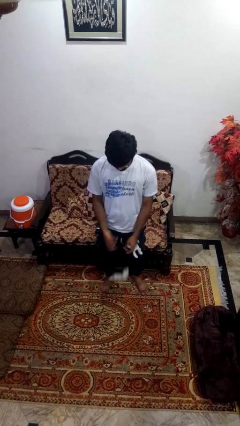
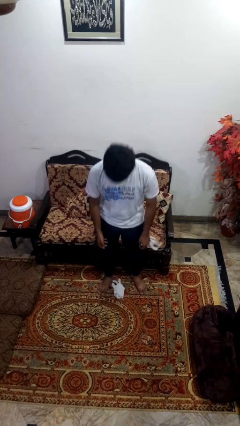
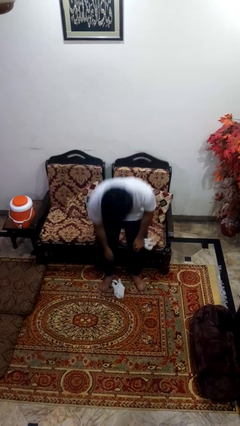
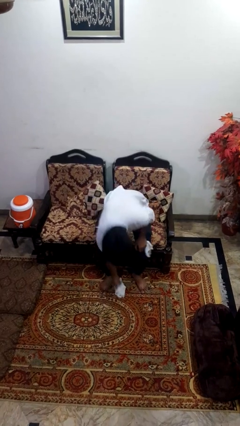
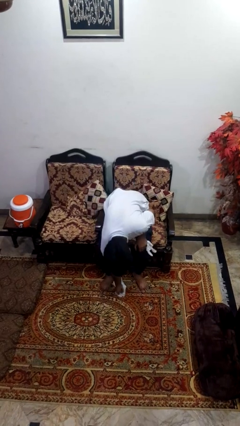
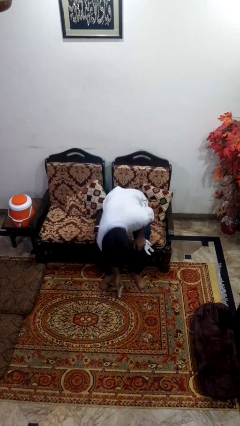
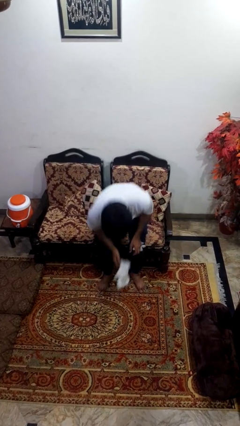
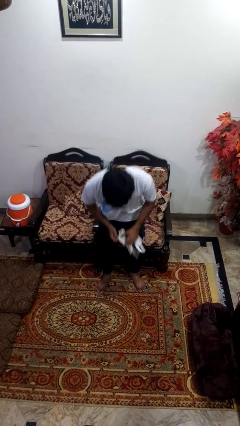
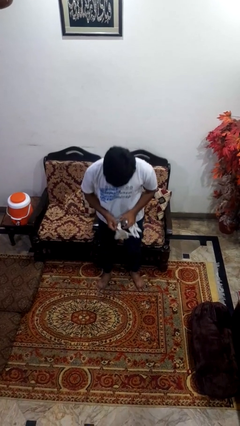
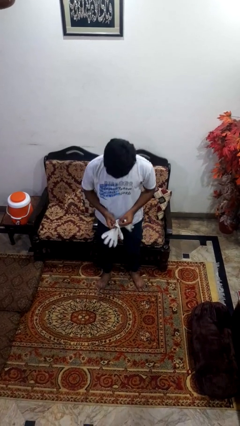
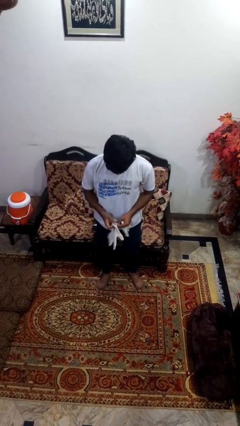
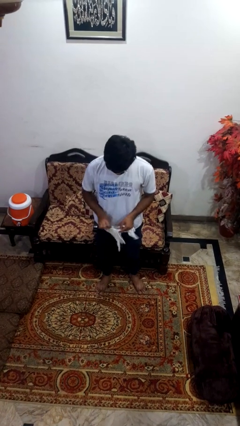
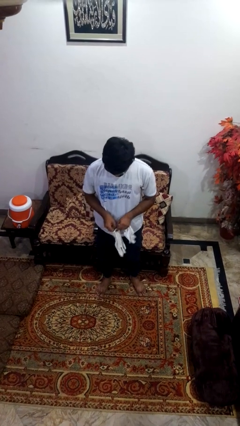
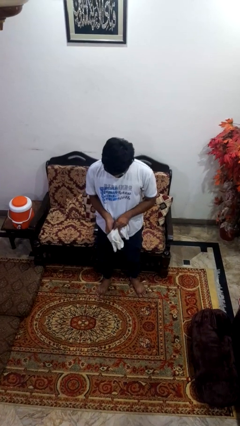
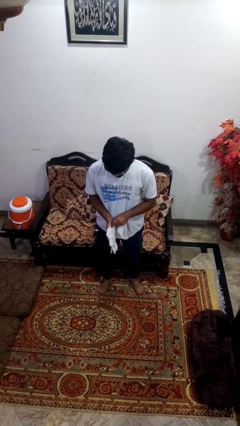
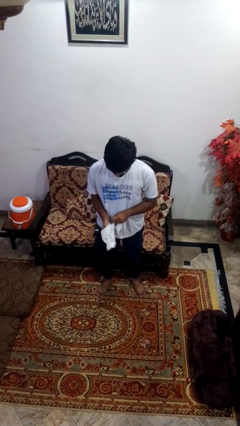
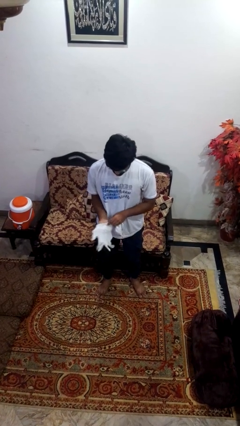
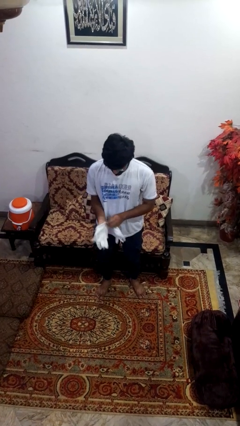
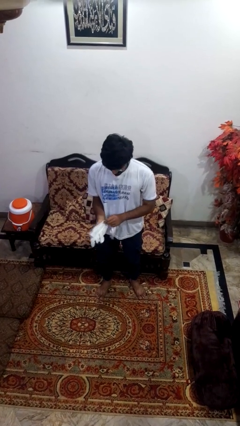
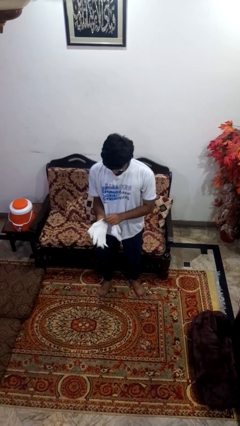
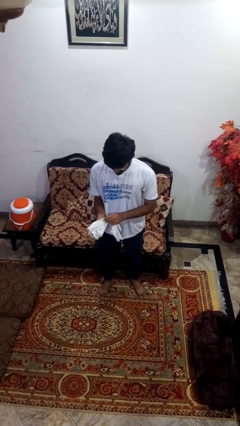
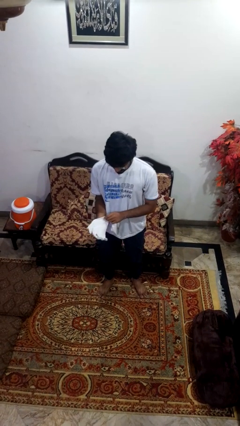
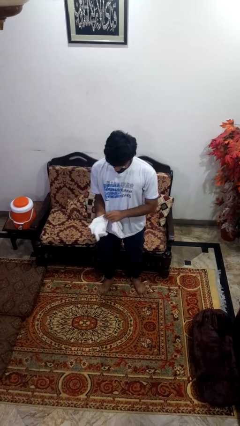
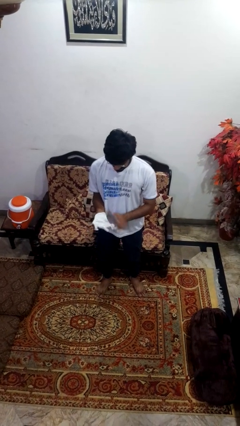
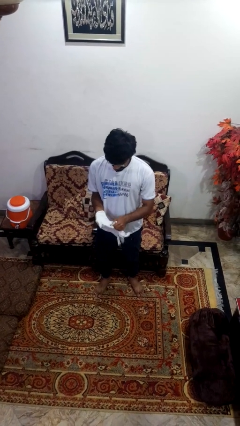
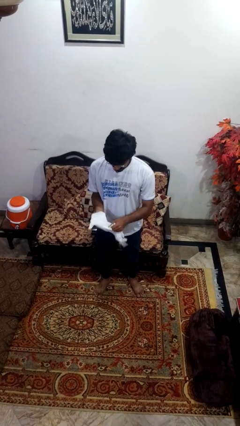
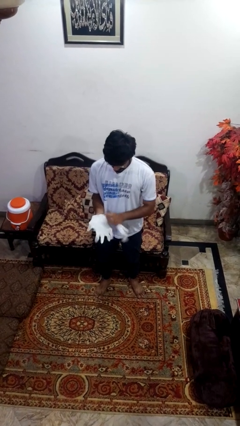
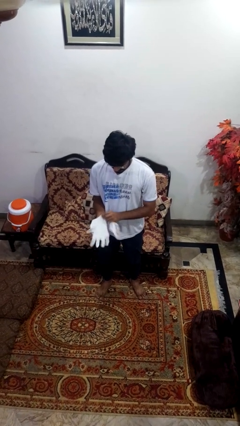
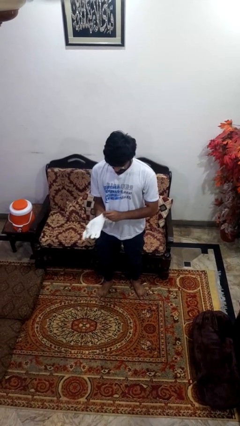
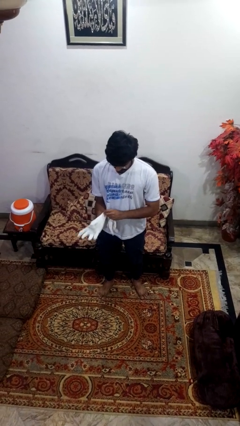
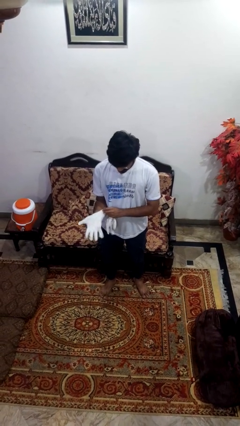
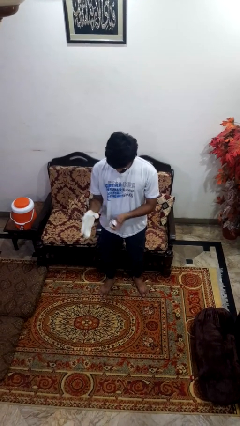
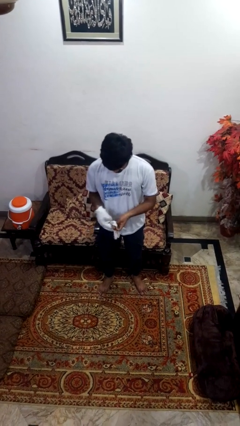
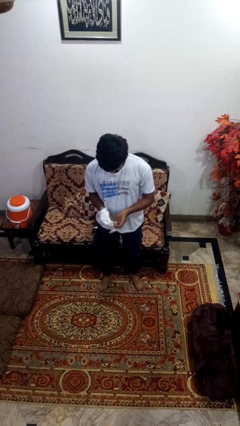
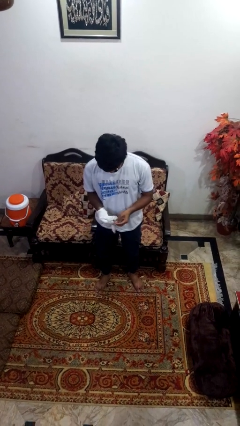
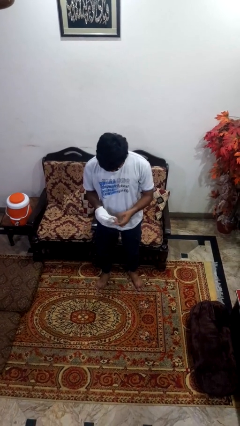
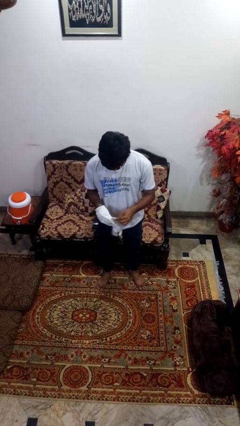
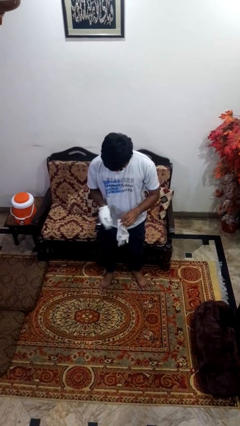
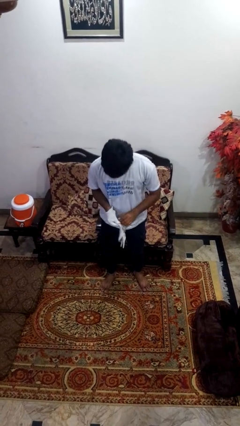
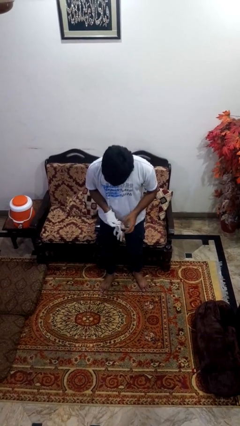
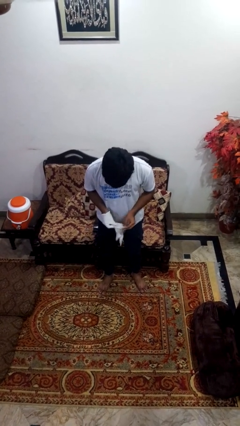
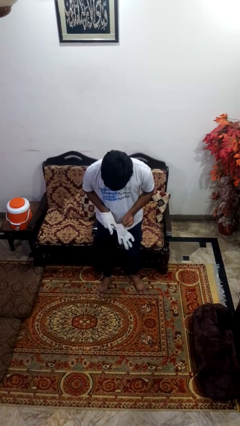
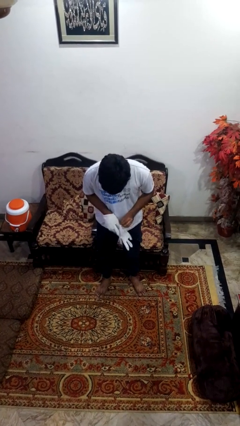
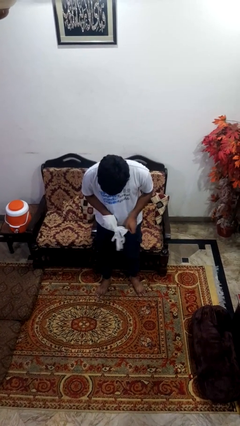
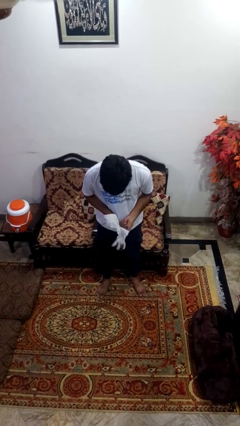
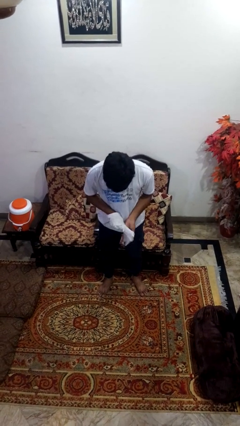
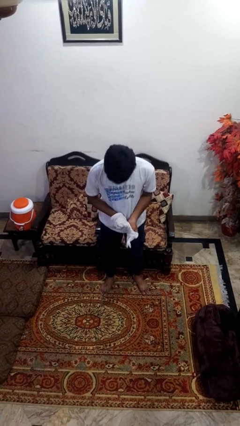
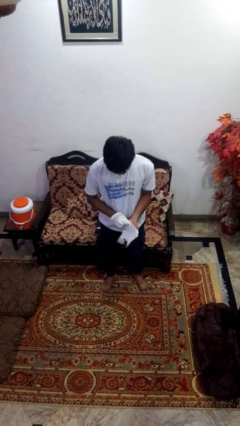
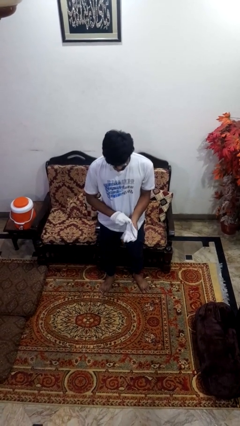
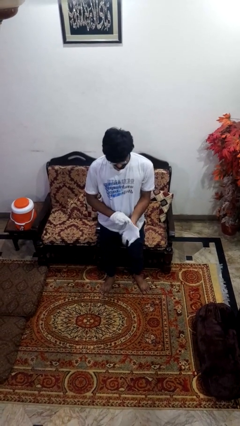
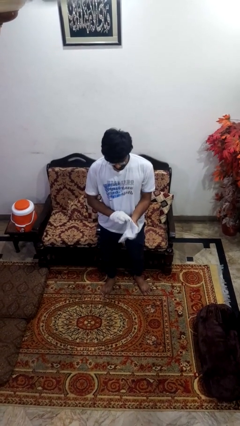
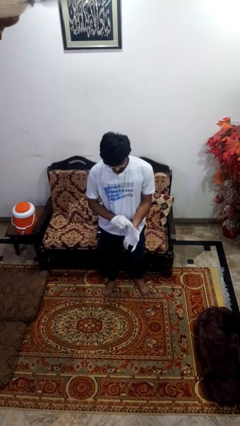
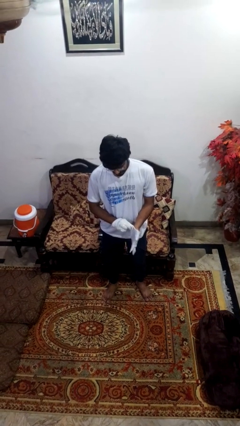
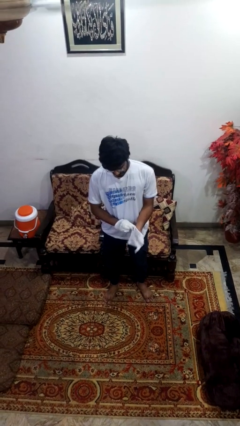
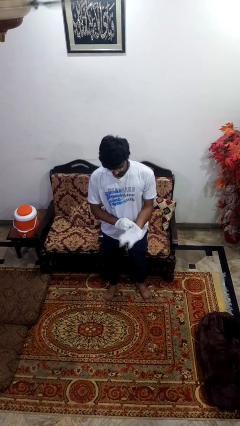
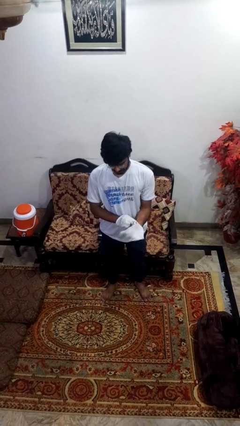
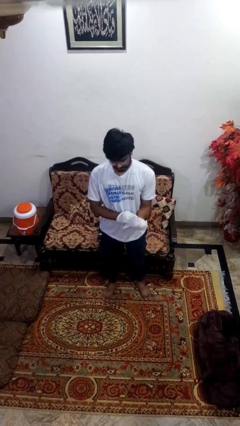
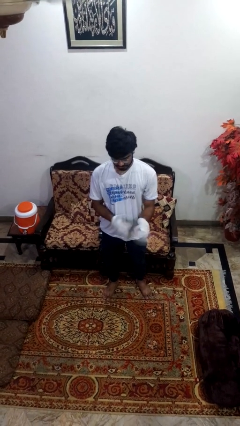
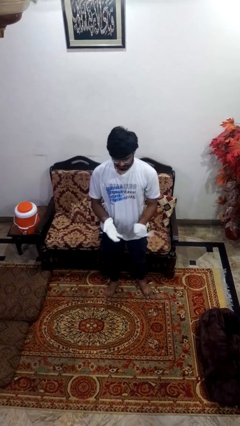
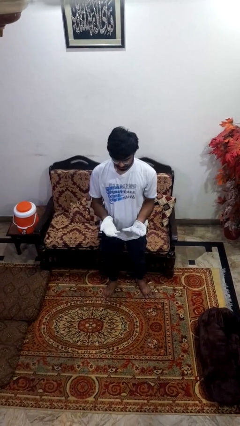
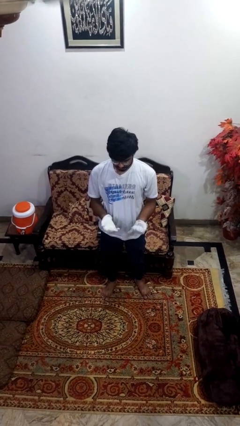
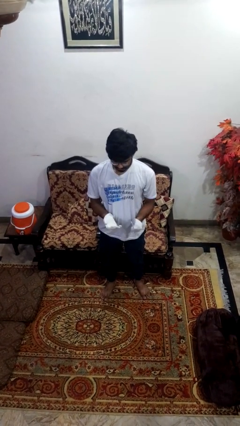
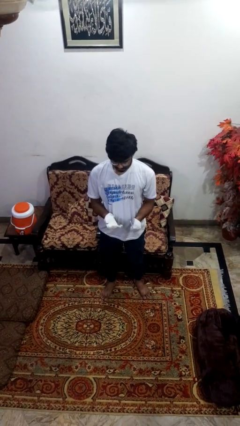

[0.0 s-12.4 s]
person puts on gloves
